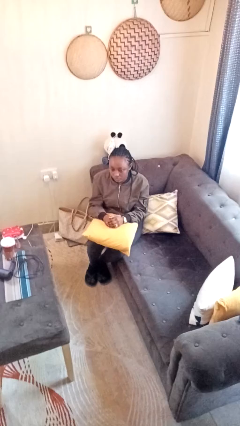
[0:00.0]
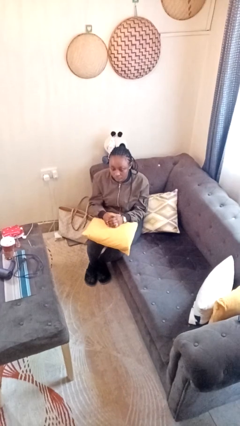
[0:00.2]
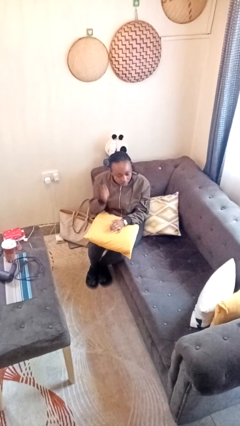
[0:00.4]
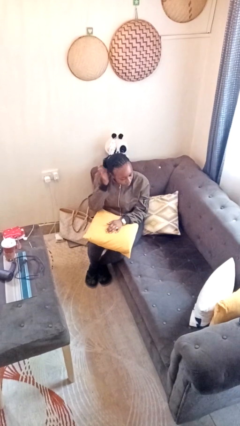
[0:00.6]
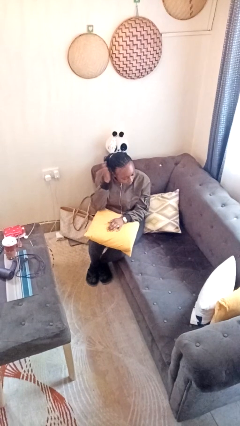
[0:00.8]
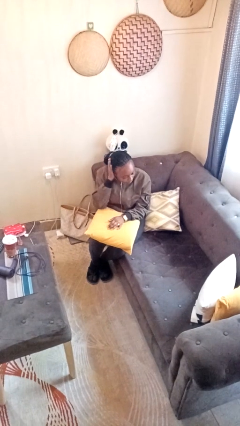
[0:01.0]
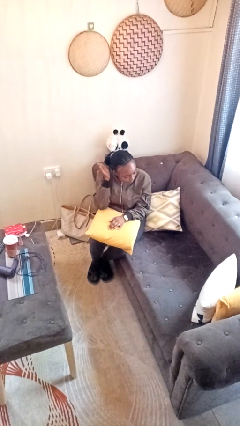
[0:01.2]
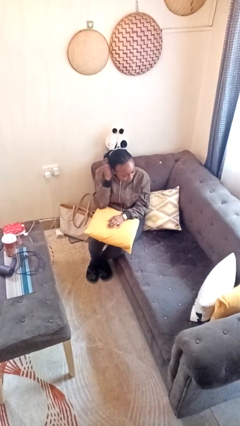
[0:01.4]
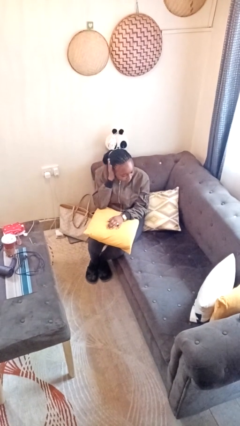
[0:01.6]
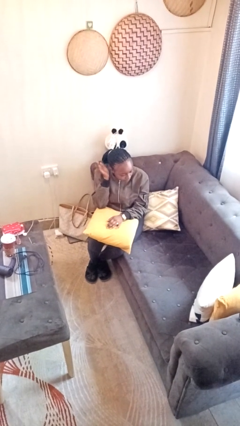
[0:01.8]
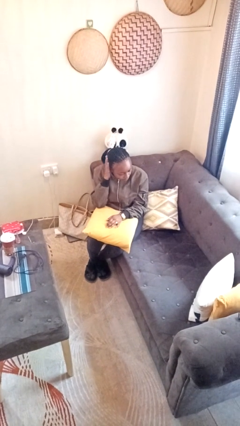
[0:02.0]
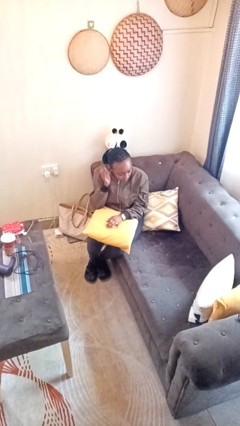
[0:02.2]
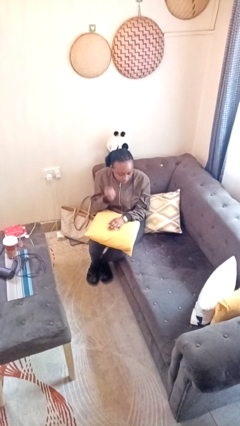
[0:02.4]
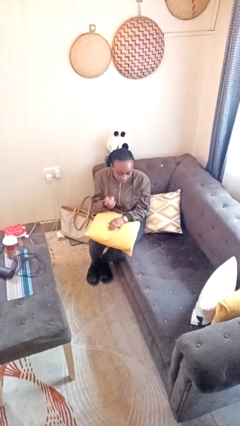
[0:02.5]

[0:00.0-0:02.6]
person pats head

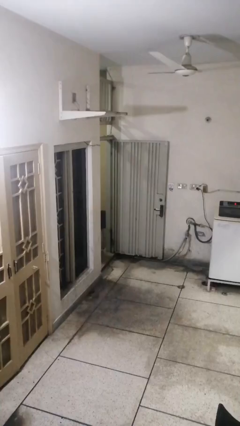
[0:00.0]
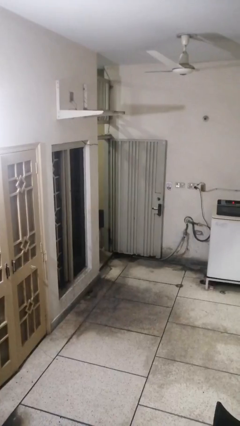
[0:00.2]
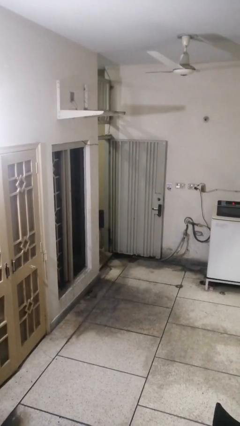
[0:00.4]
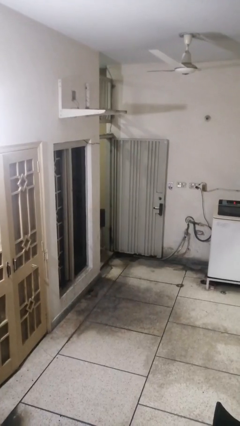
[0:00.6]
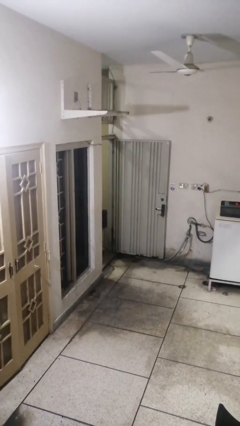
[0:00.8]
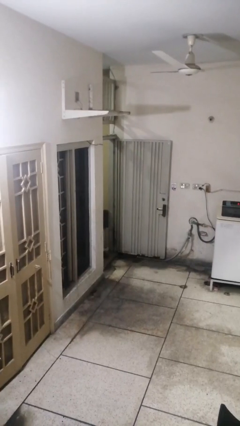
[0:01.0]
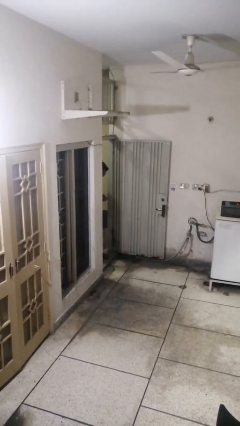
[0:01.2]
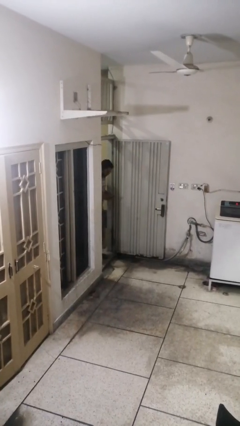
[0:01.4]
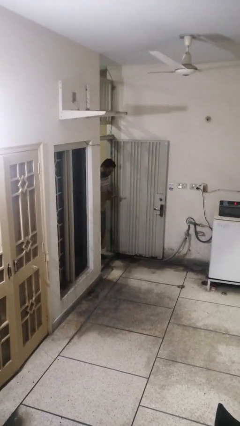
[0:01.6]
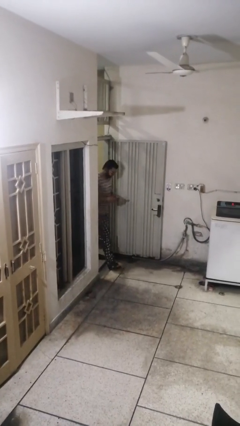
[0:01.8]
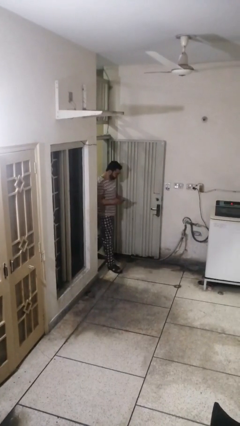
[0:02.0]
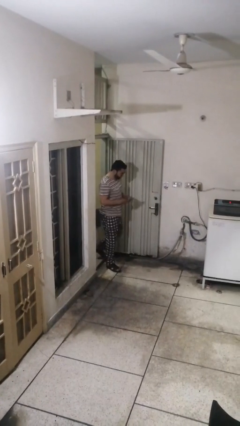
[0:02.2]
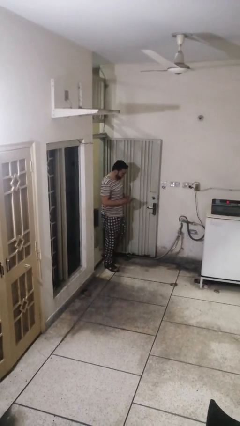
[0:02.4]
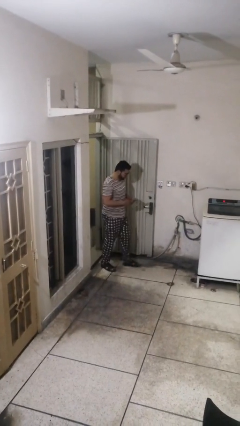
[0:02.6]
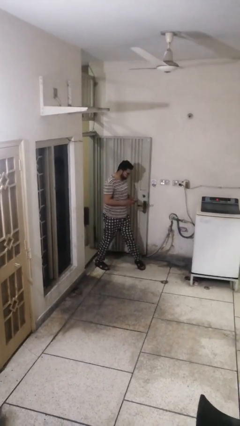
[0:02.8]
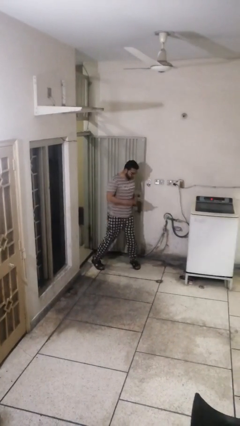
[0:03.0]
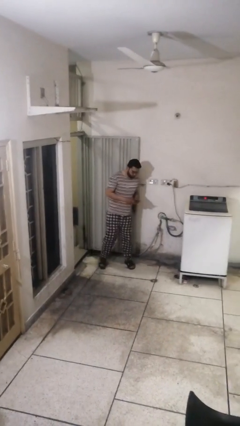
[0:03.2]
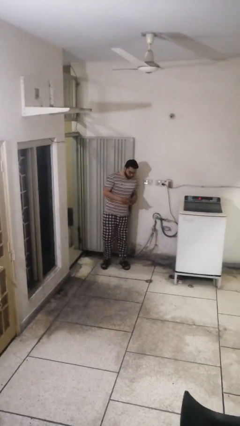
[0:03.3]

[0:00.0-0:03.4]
person enters scene through structure

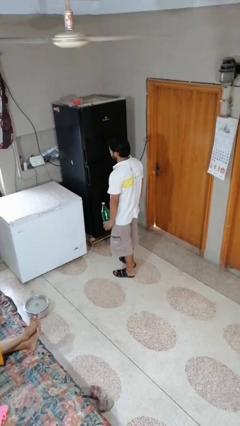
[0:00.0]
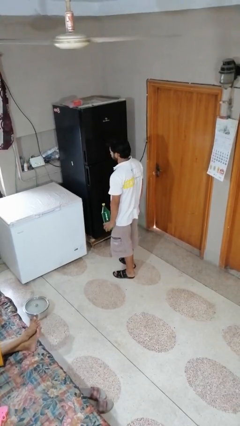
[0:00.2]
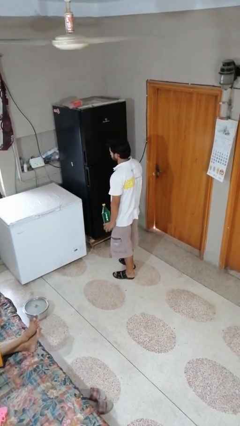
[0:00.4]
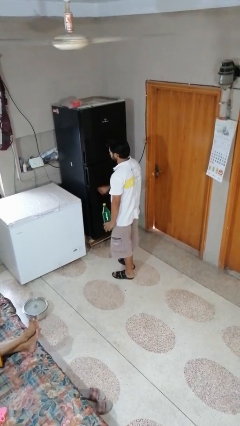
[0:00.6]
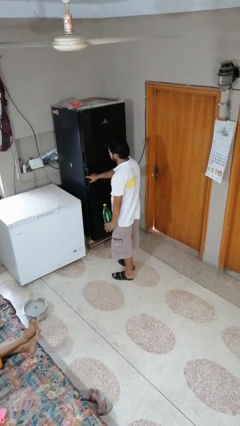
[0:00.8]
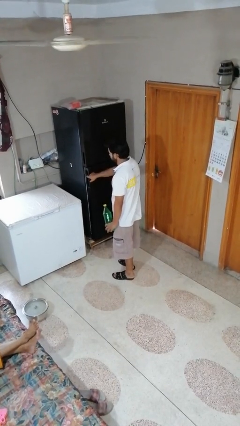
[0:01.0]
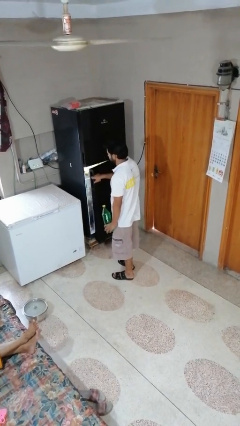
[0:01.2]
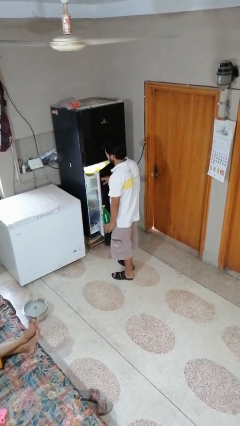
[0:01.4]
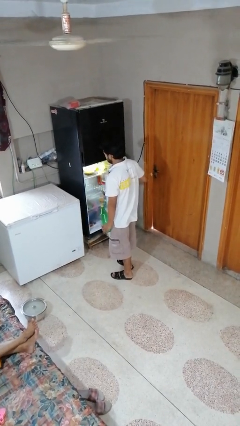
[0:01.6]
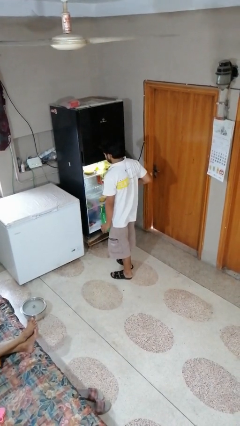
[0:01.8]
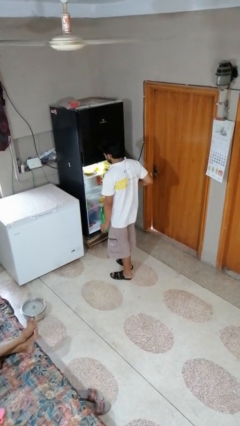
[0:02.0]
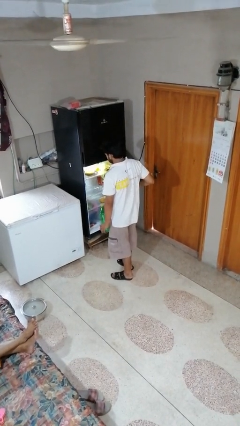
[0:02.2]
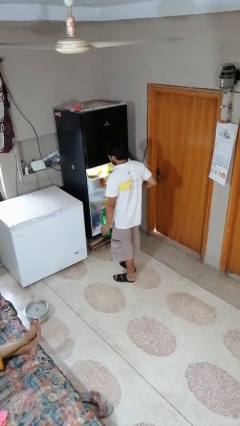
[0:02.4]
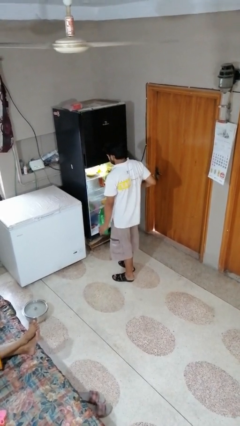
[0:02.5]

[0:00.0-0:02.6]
person opens refrigerator

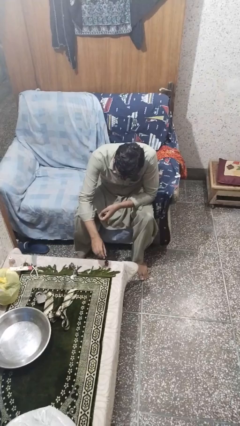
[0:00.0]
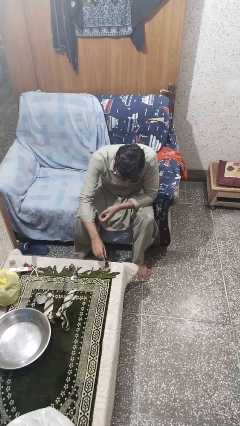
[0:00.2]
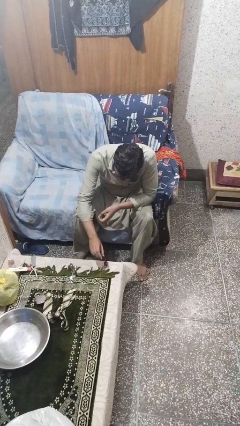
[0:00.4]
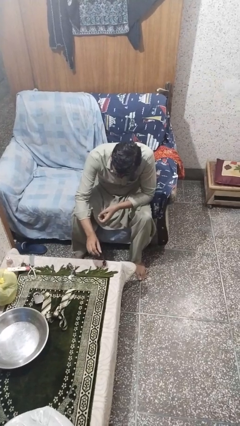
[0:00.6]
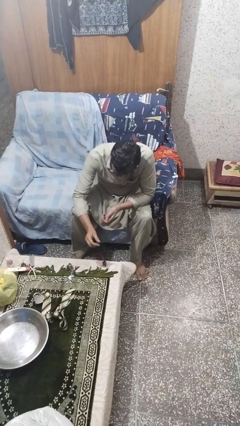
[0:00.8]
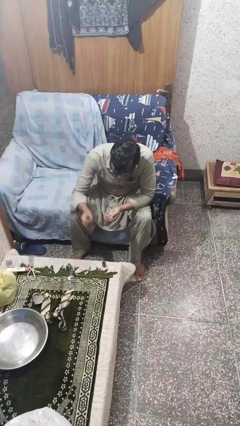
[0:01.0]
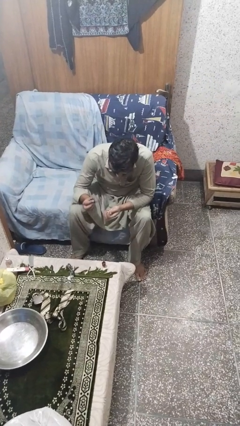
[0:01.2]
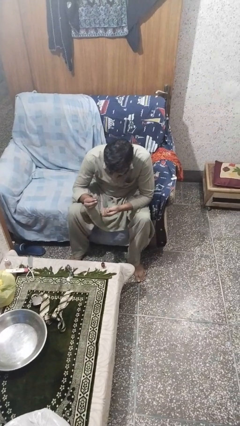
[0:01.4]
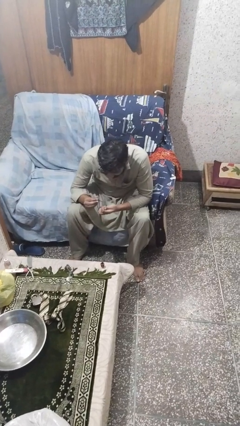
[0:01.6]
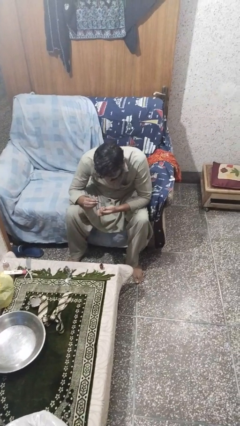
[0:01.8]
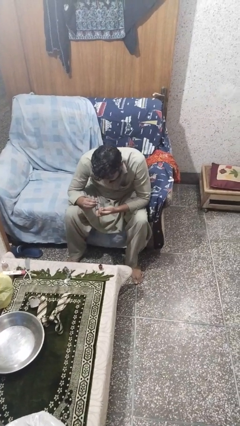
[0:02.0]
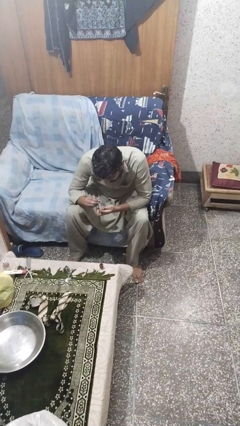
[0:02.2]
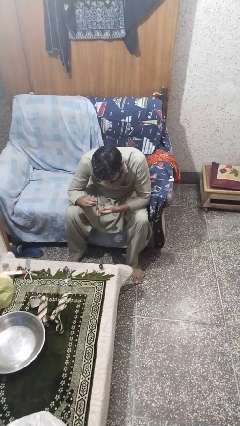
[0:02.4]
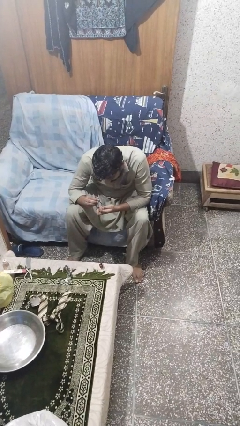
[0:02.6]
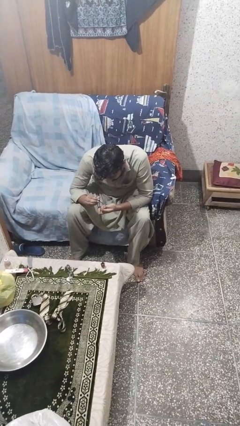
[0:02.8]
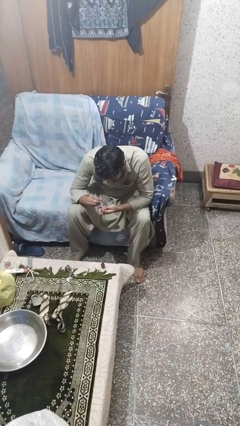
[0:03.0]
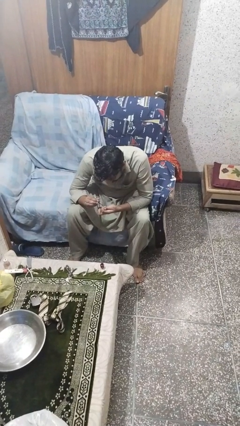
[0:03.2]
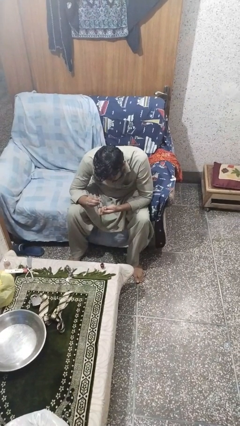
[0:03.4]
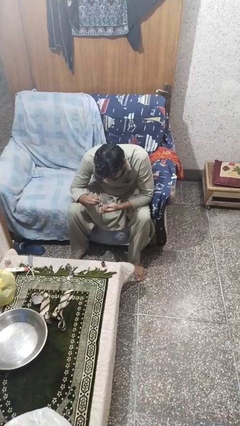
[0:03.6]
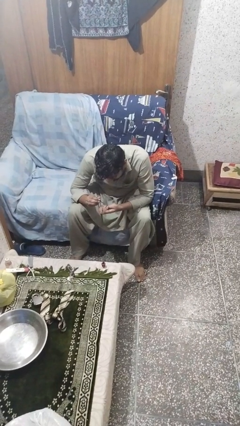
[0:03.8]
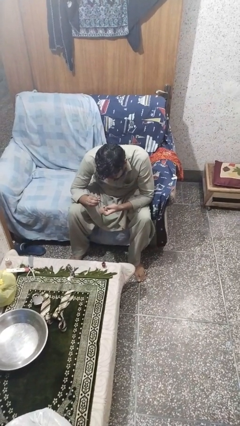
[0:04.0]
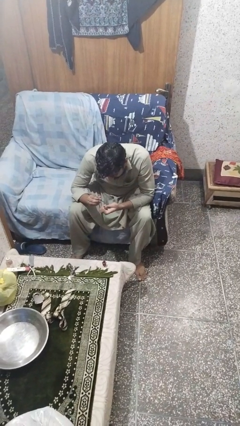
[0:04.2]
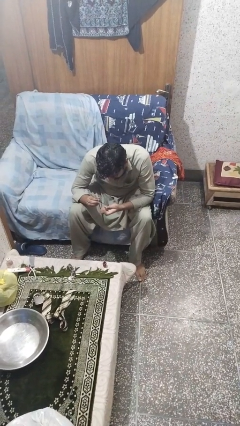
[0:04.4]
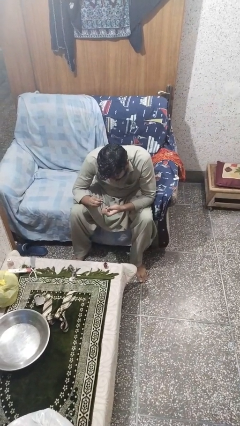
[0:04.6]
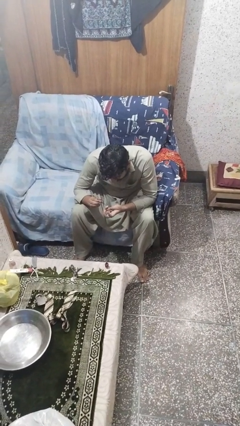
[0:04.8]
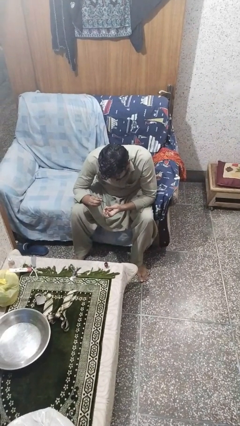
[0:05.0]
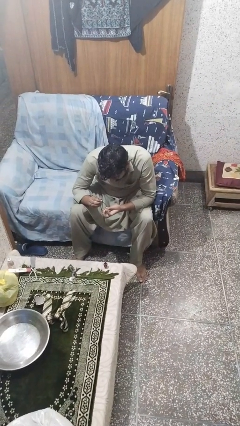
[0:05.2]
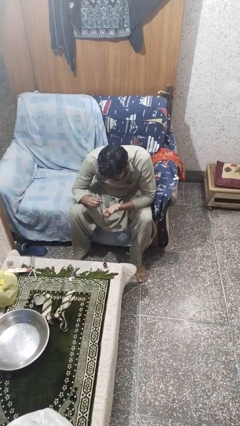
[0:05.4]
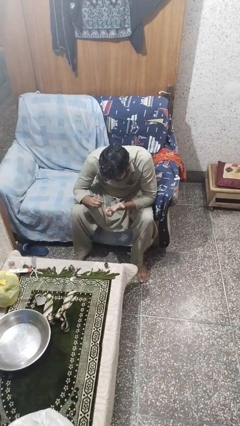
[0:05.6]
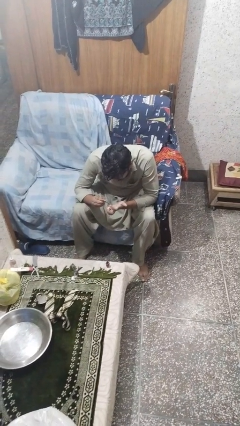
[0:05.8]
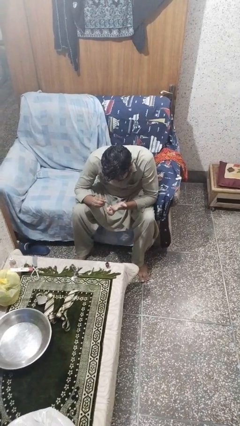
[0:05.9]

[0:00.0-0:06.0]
person paints fingernails

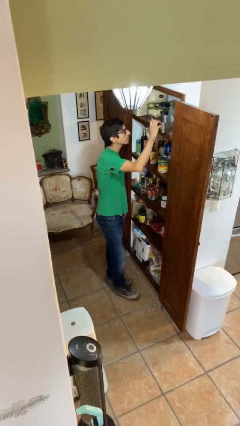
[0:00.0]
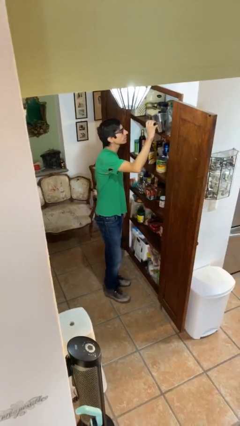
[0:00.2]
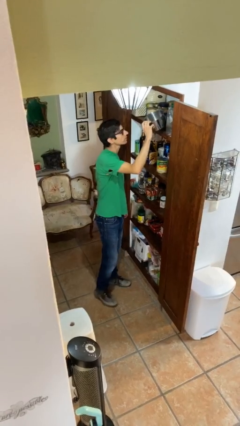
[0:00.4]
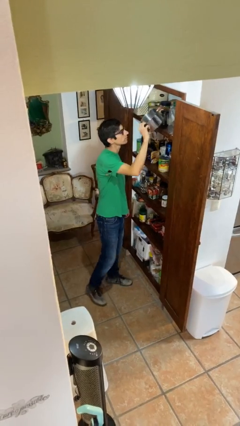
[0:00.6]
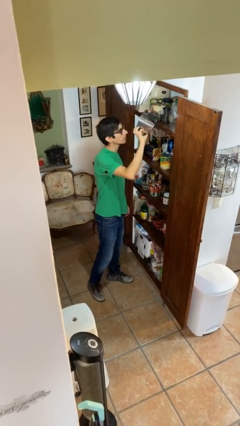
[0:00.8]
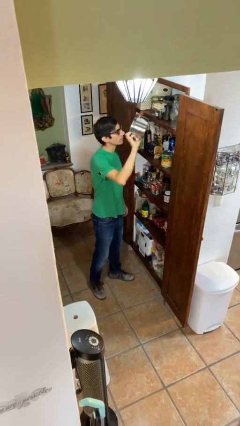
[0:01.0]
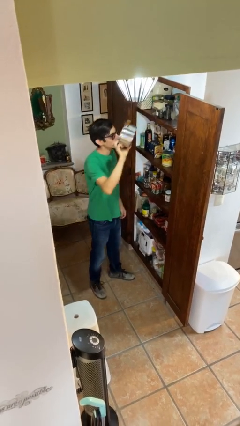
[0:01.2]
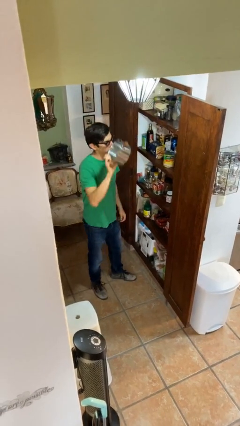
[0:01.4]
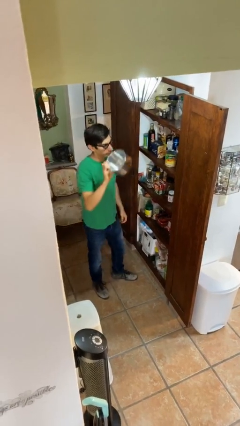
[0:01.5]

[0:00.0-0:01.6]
person picks up object from shelf

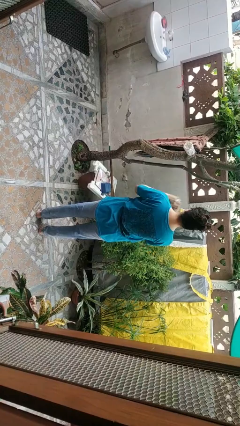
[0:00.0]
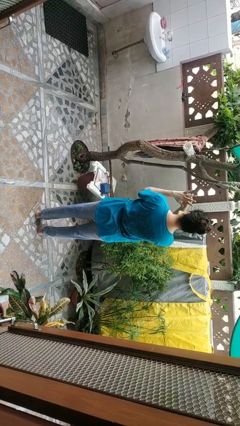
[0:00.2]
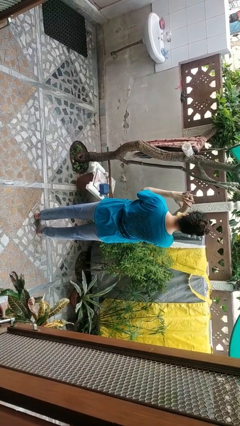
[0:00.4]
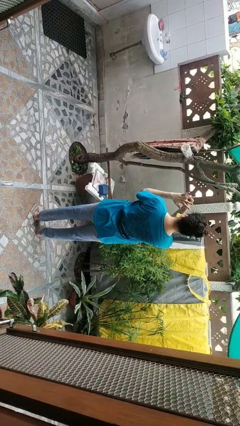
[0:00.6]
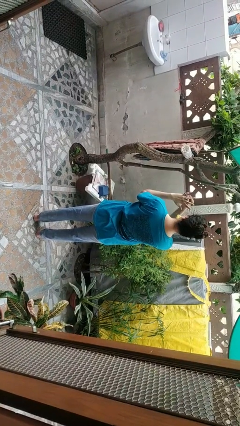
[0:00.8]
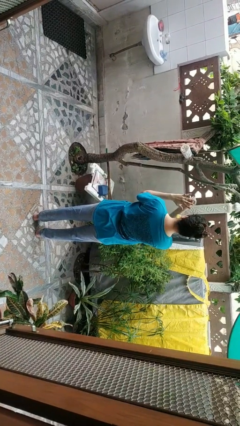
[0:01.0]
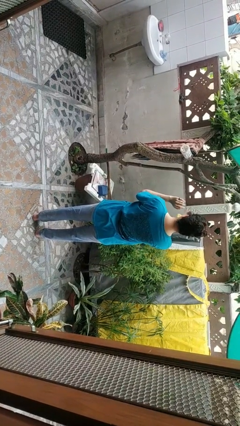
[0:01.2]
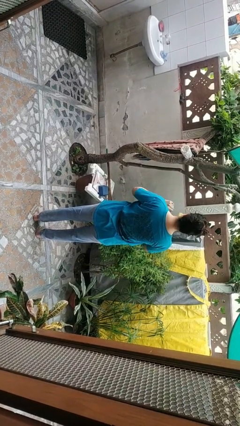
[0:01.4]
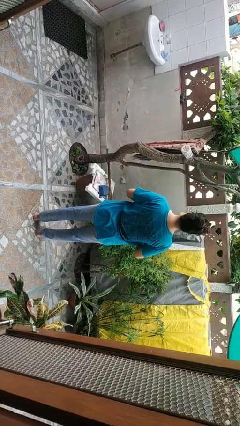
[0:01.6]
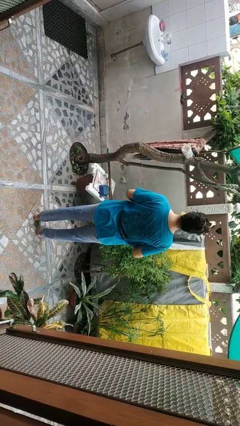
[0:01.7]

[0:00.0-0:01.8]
person takes off ring
